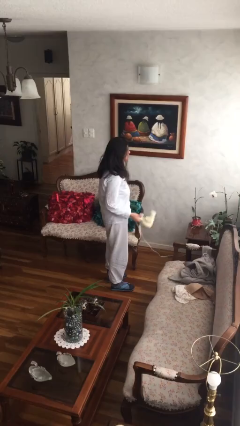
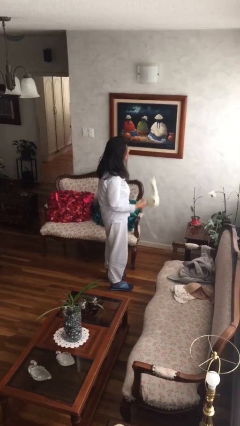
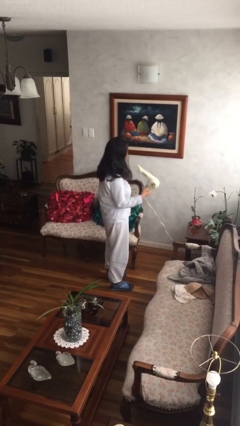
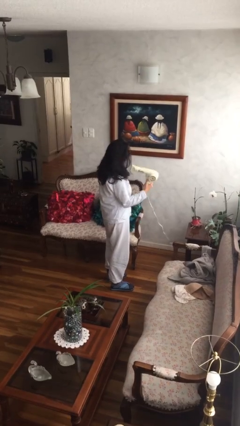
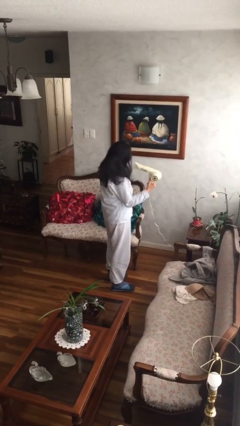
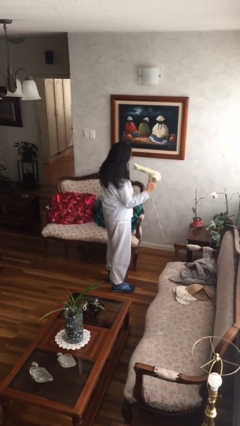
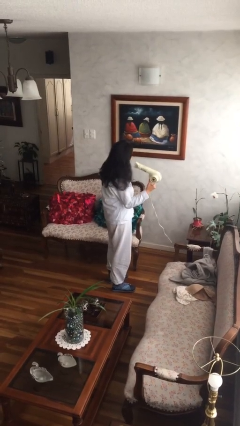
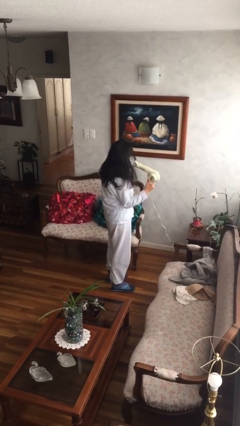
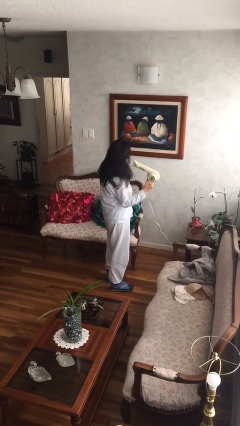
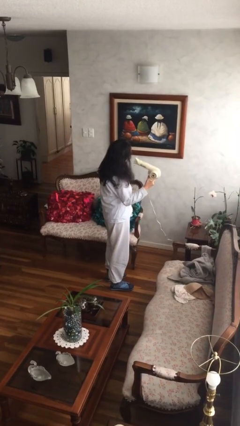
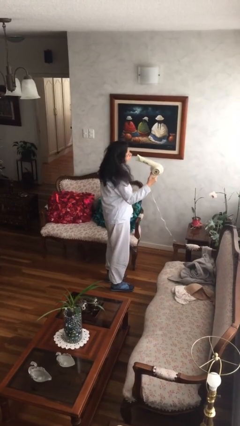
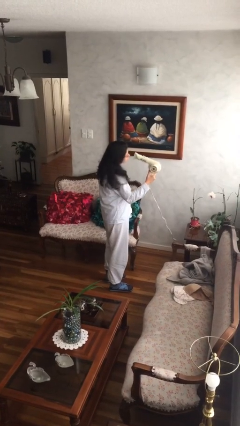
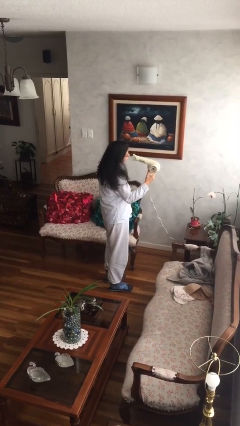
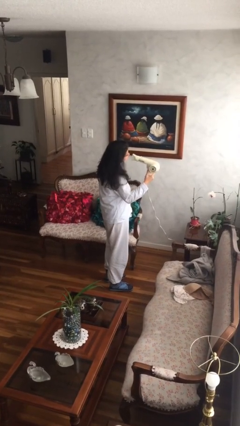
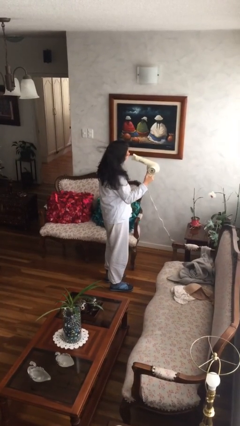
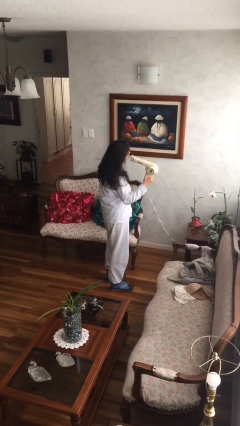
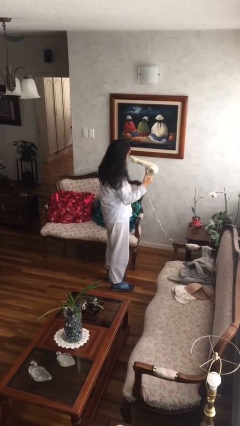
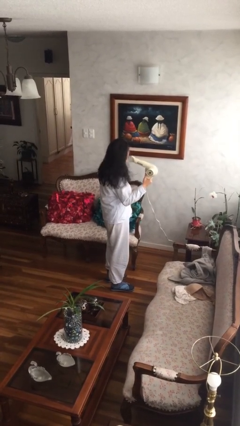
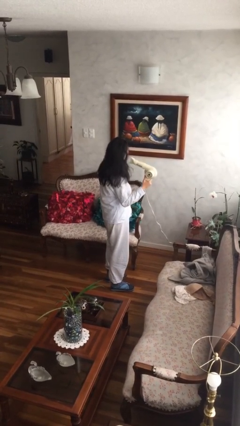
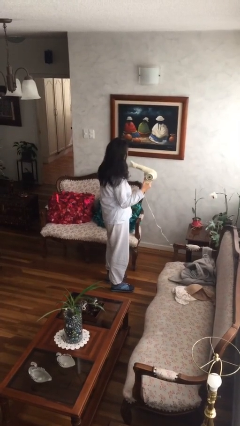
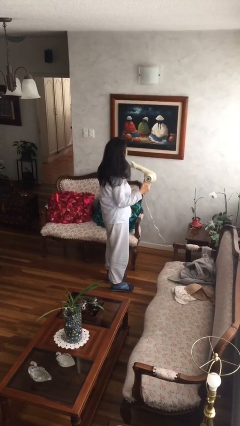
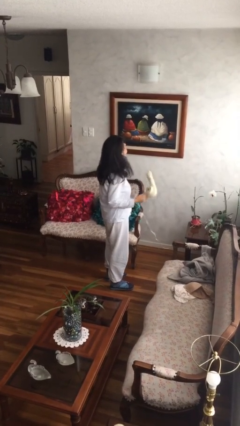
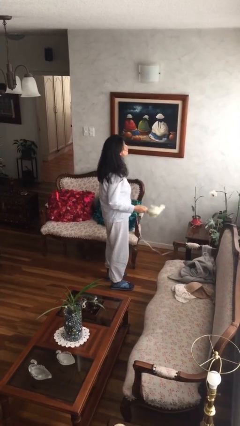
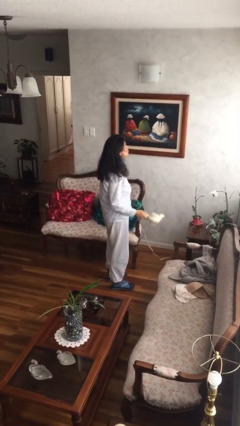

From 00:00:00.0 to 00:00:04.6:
person dries hair with hairdryer

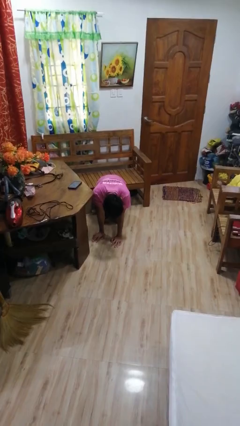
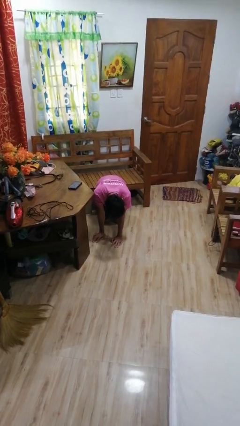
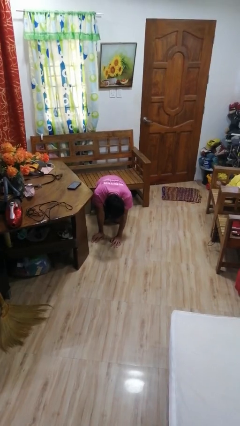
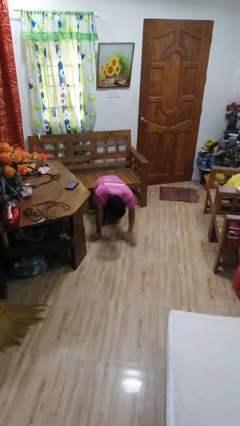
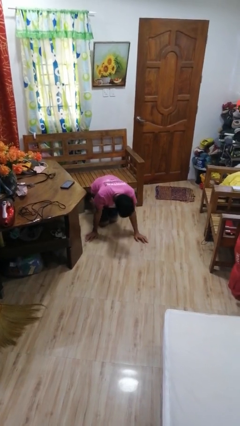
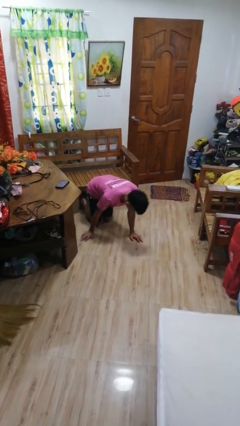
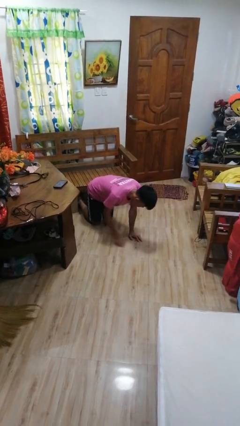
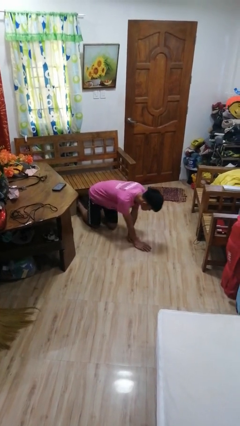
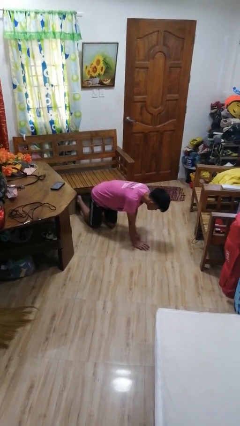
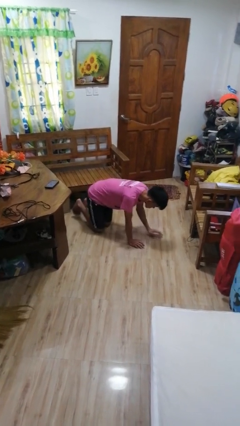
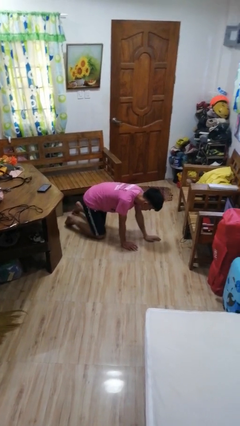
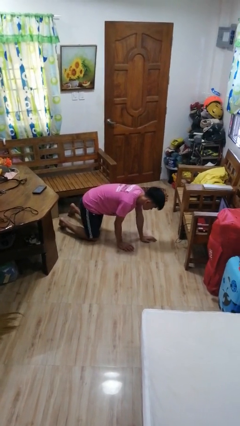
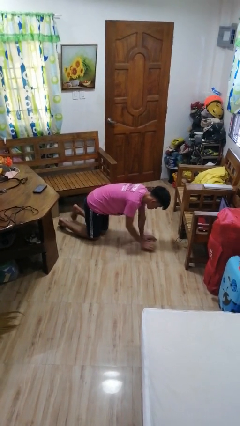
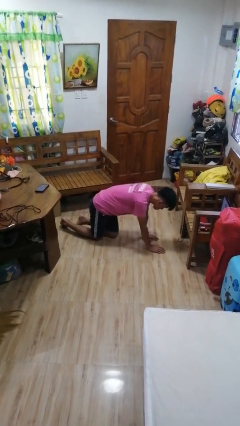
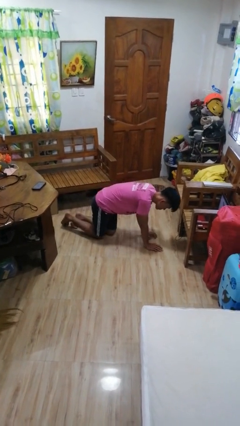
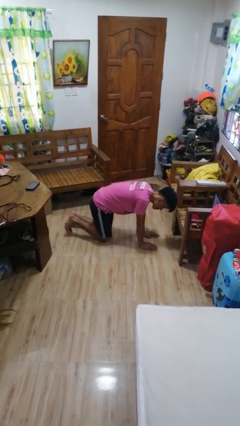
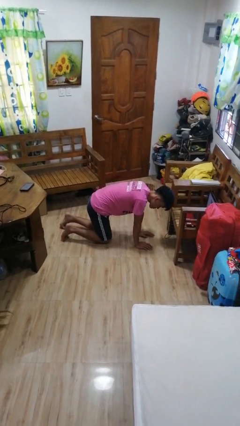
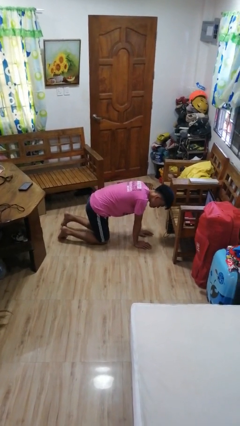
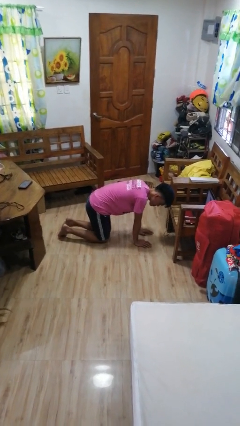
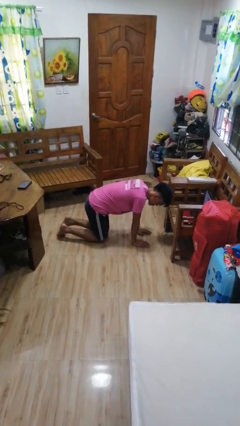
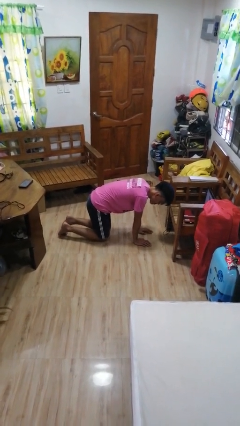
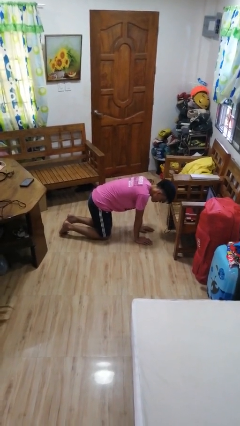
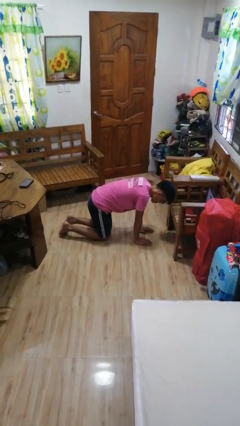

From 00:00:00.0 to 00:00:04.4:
person crawls

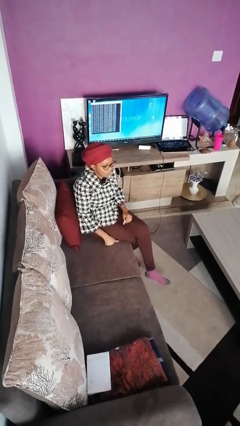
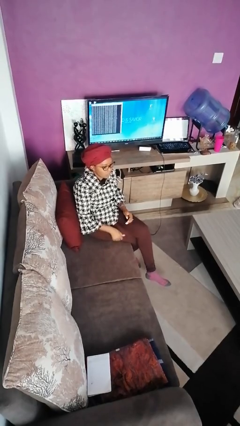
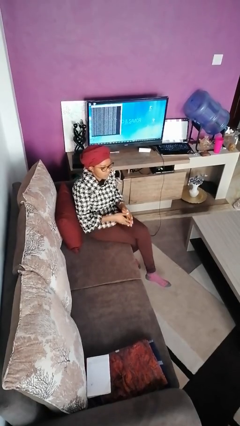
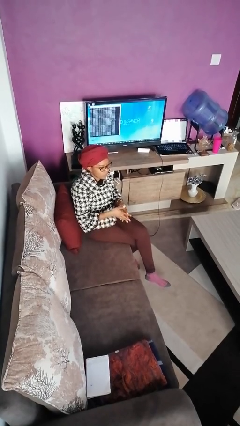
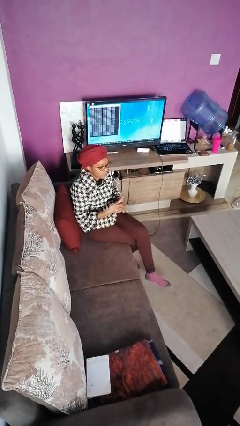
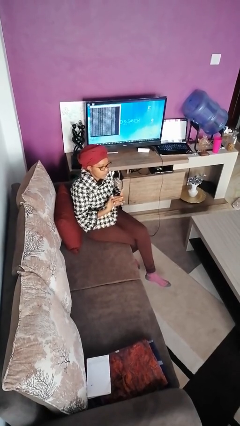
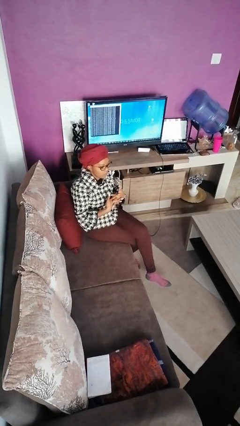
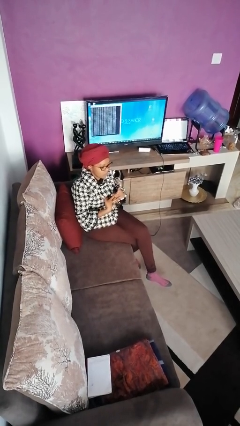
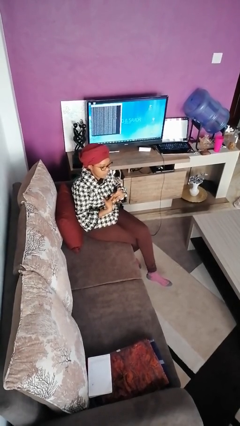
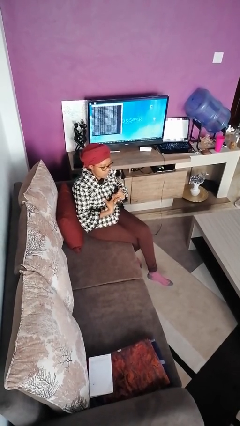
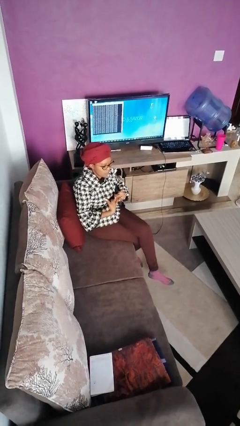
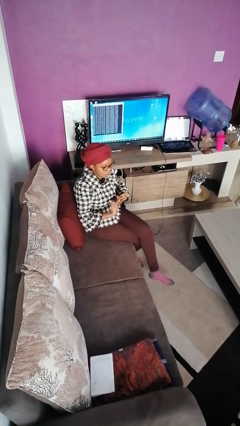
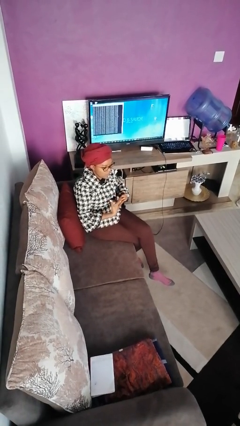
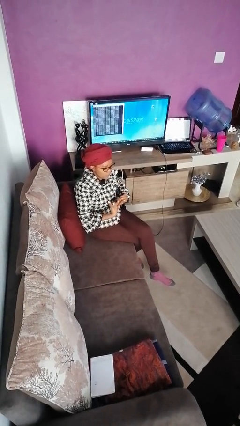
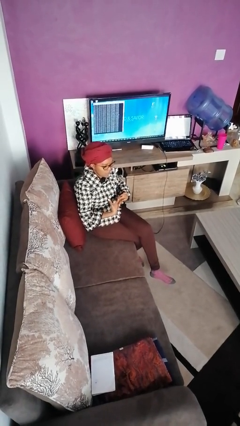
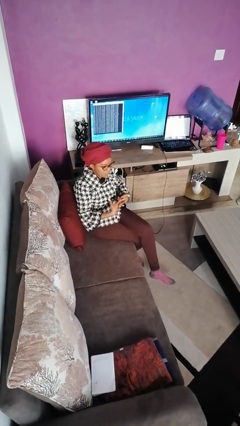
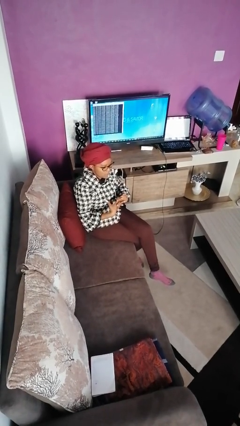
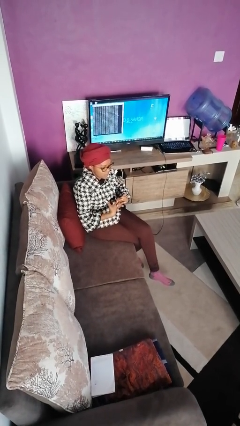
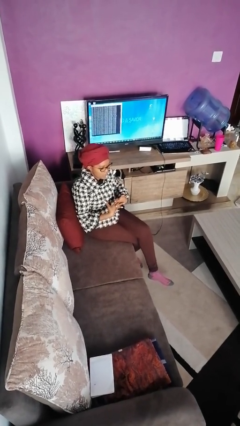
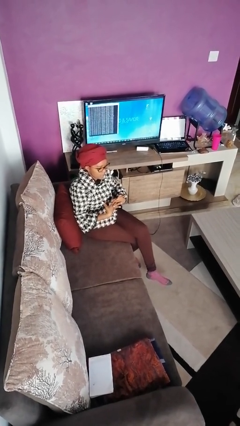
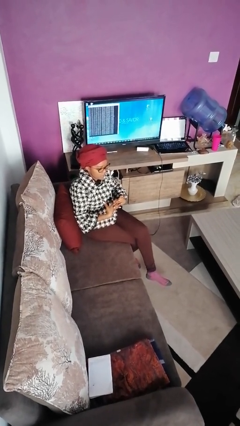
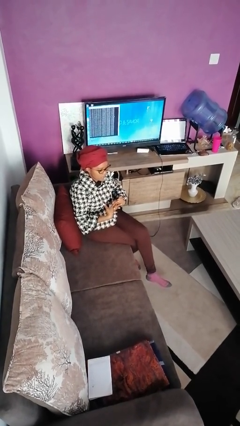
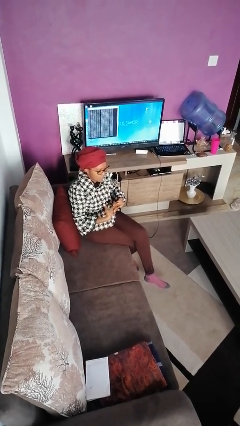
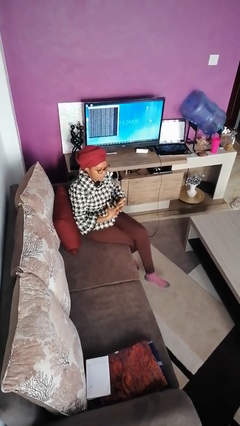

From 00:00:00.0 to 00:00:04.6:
person cracks knuckles

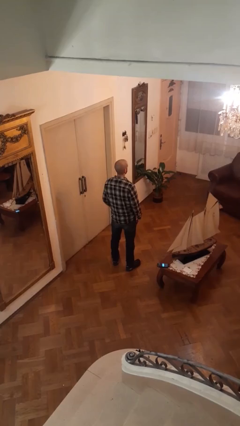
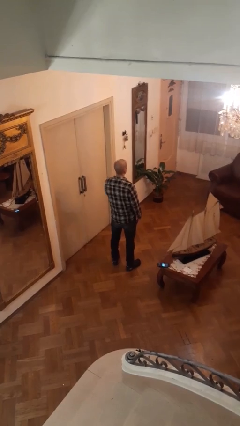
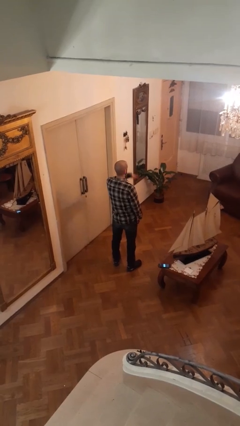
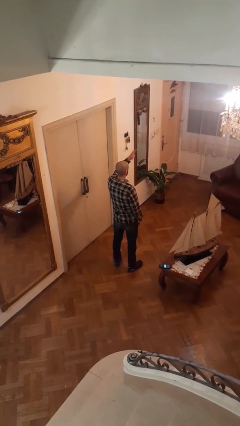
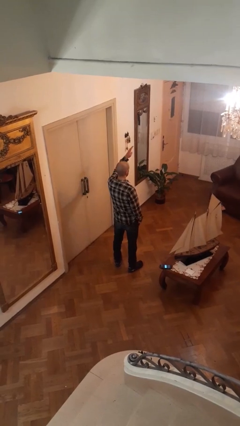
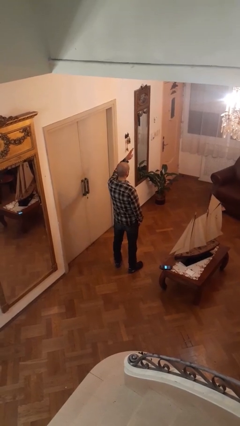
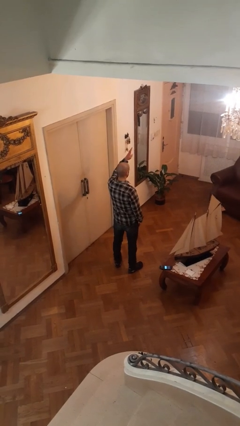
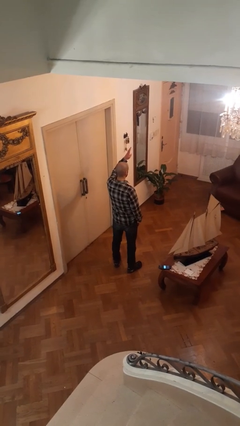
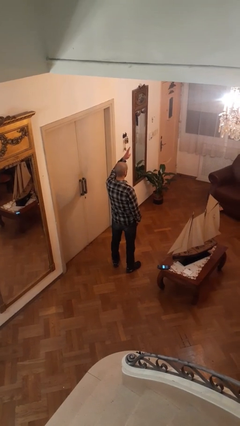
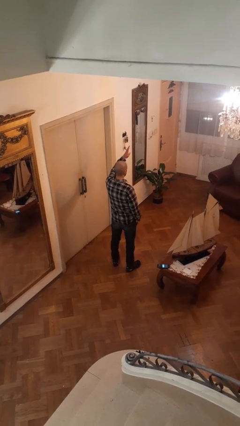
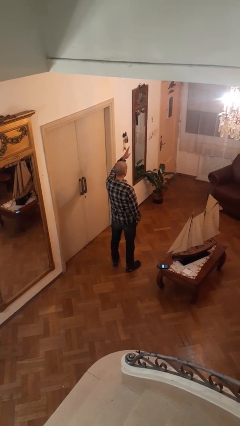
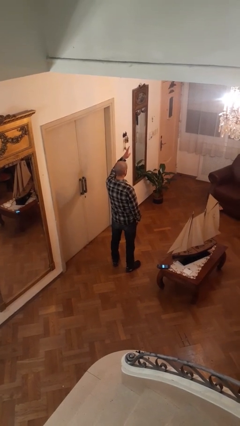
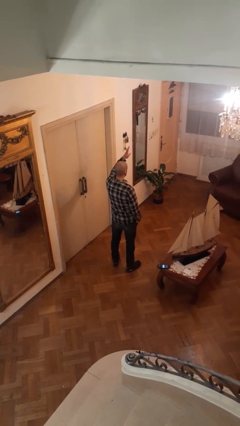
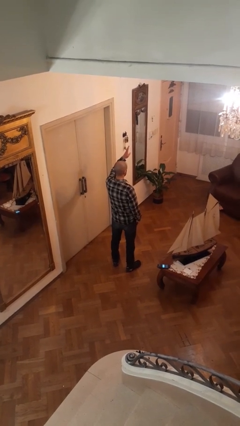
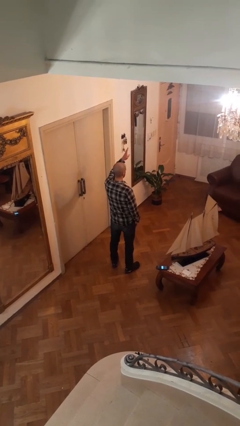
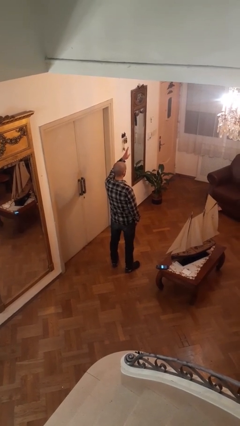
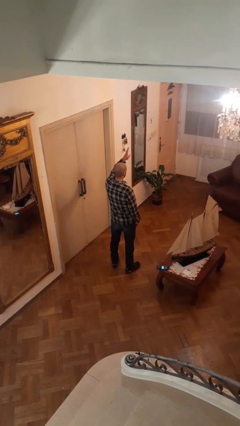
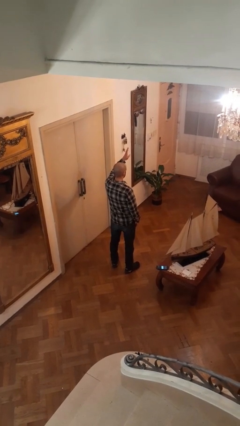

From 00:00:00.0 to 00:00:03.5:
person gestures swipe up

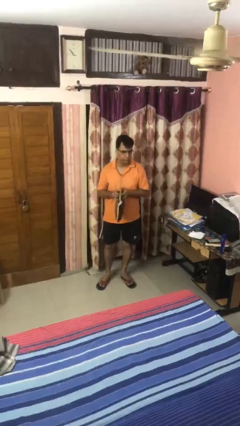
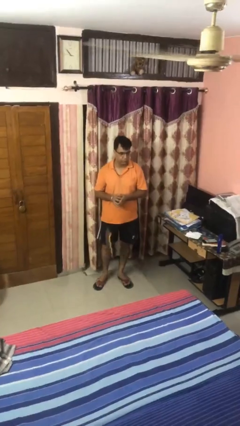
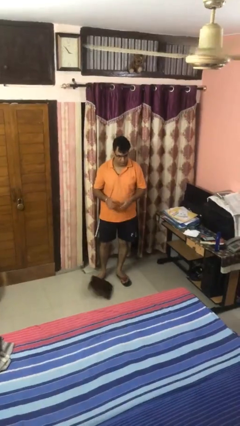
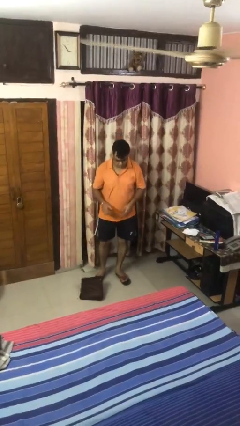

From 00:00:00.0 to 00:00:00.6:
person drops object

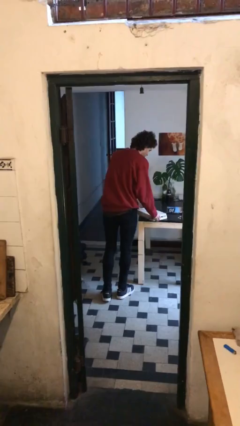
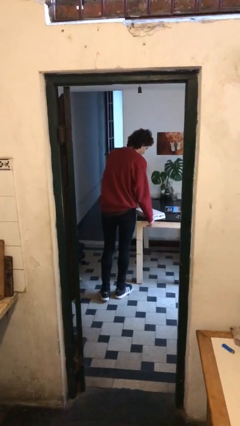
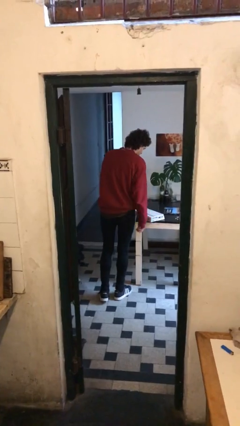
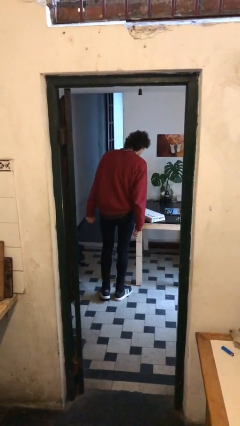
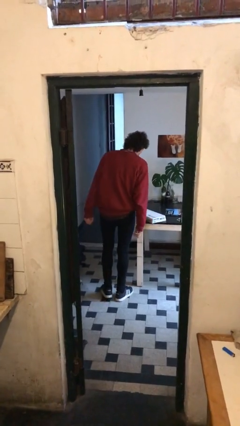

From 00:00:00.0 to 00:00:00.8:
person puts down object on table
